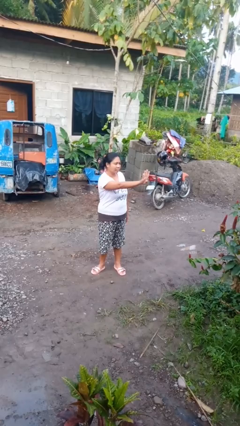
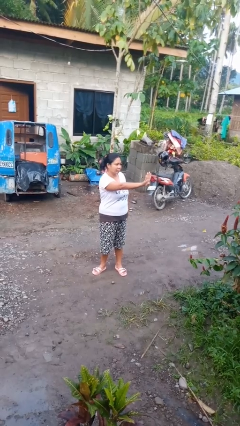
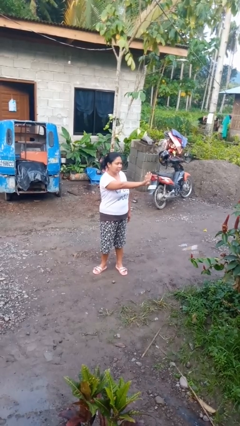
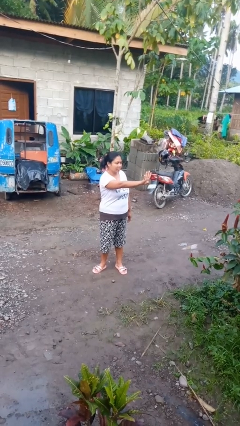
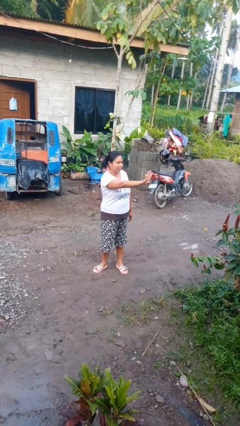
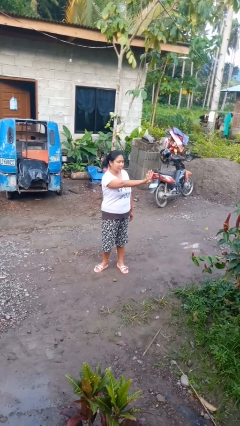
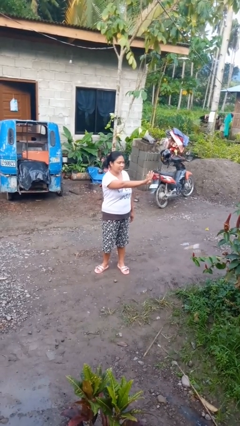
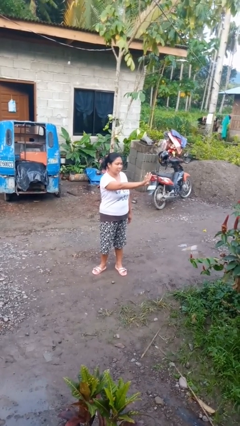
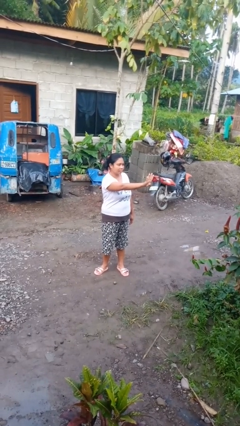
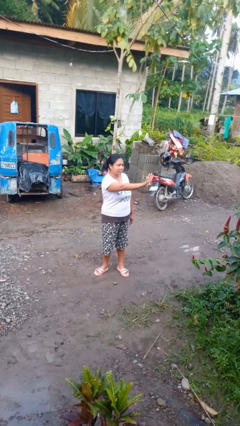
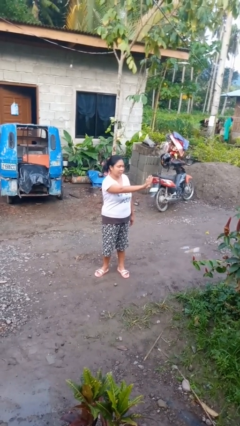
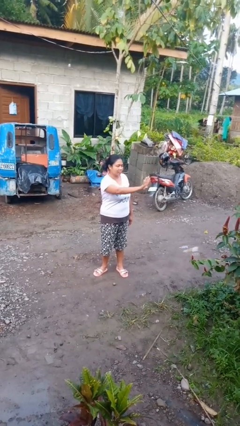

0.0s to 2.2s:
person gestures number four

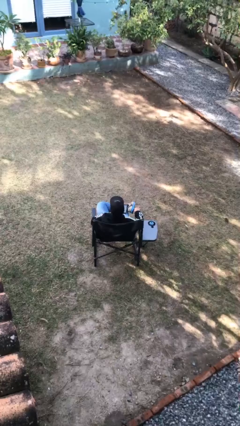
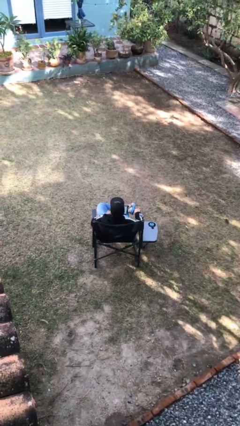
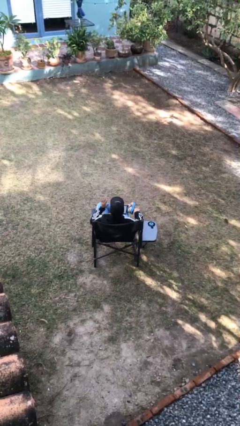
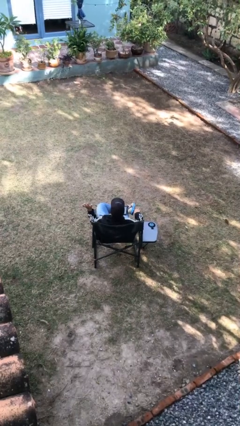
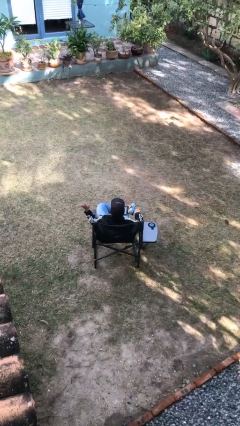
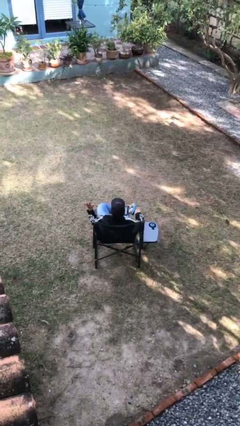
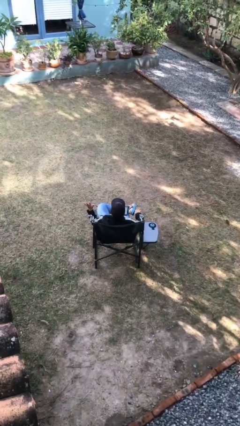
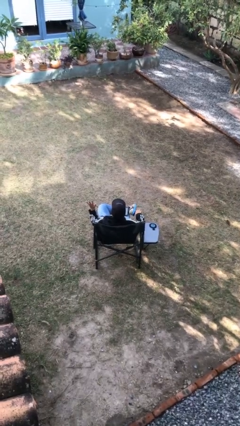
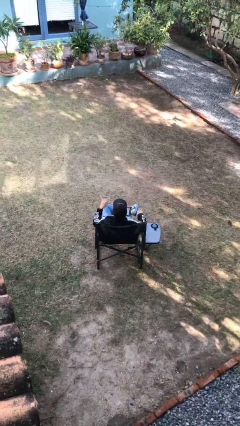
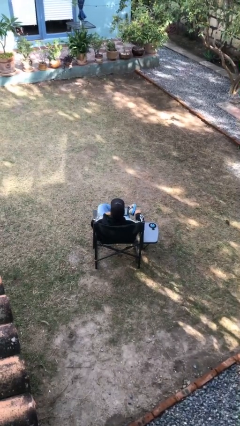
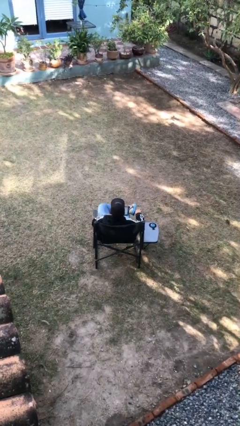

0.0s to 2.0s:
person gestures number five

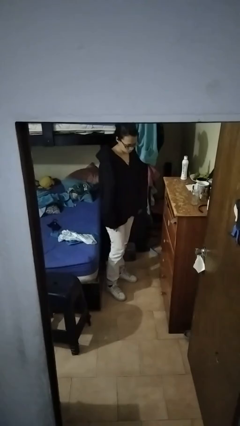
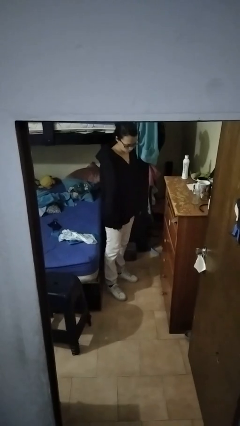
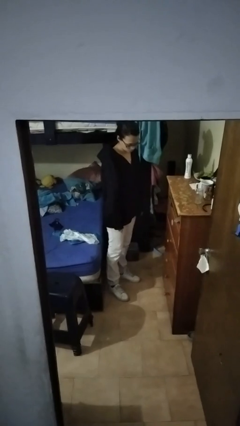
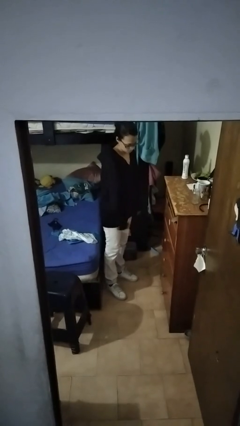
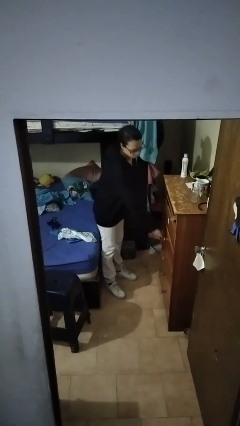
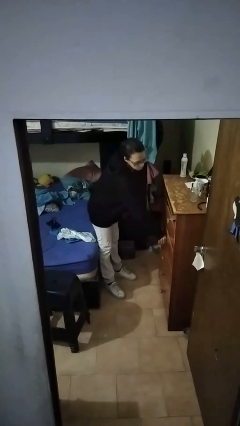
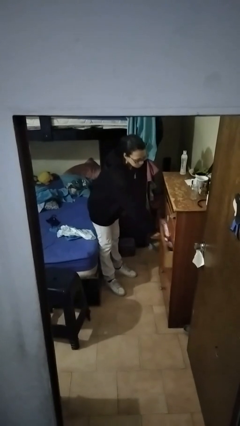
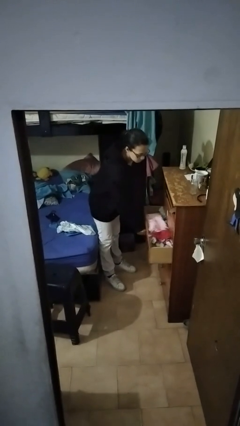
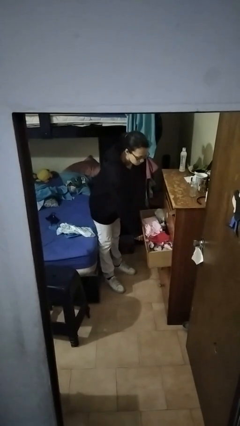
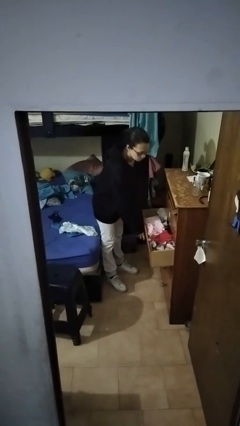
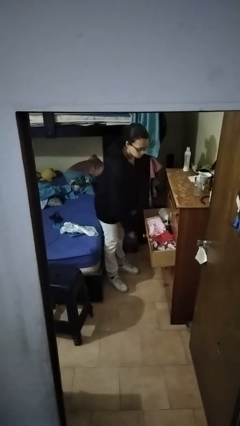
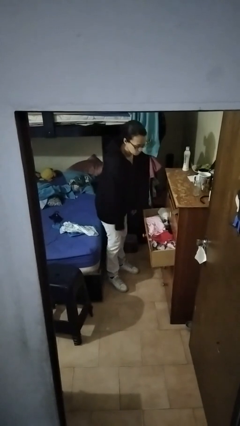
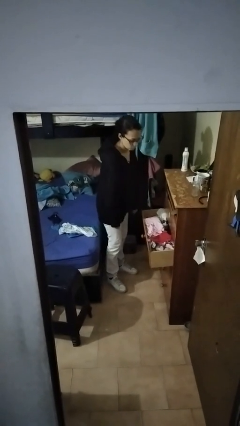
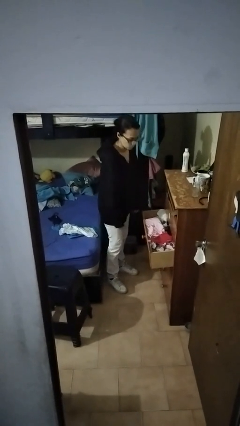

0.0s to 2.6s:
person opens dresser drawer

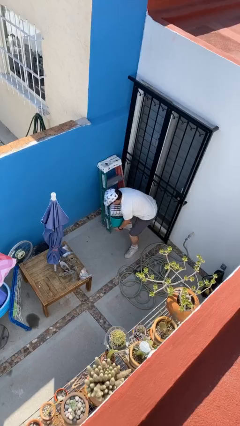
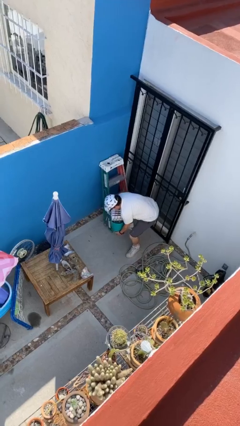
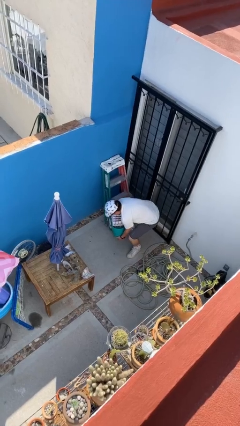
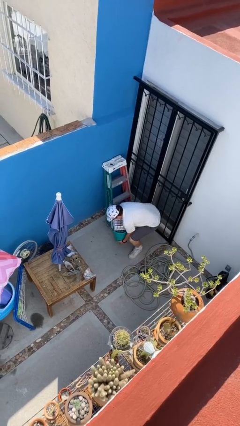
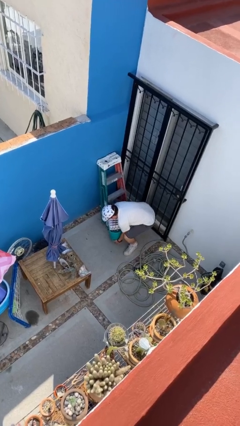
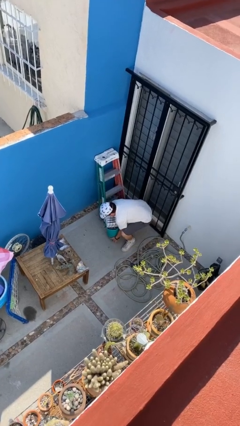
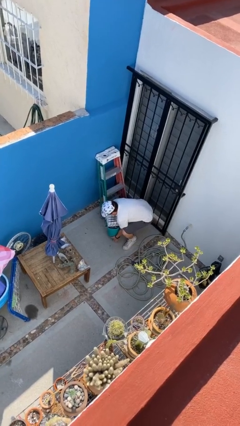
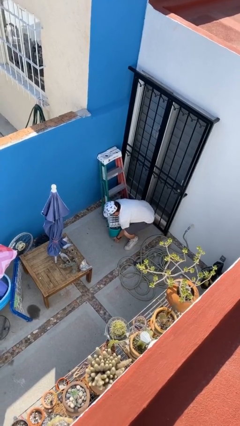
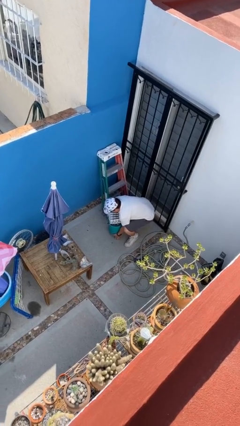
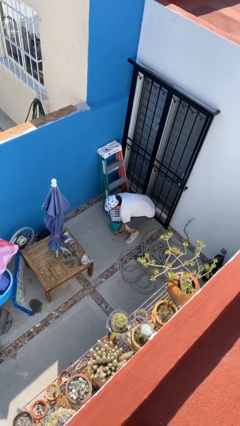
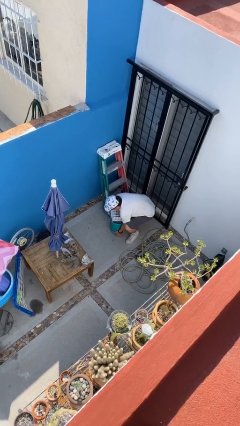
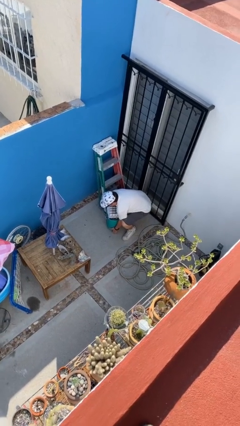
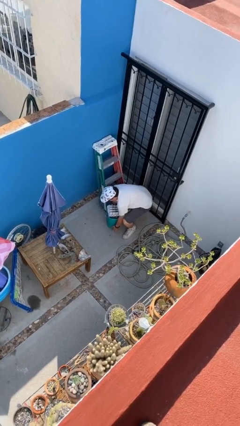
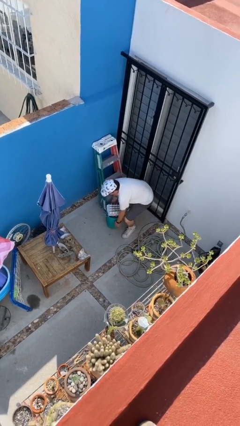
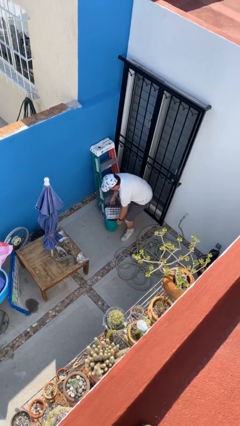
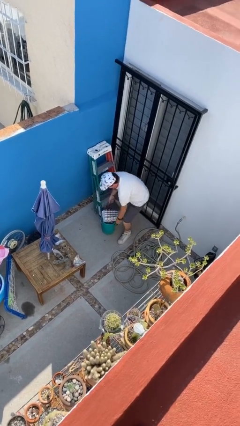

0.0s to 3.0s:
person puts down object on floor

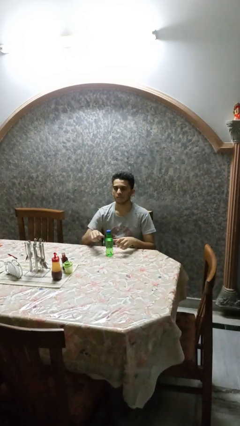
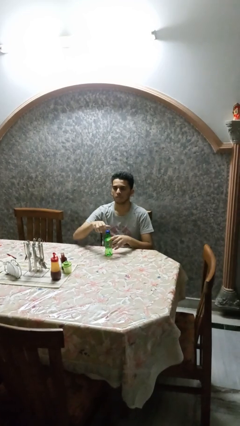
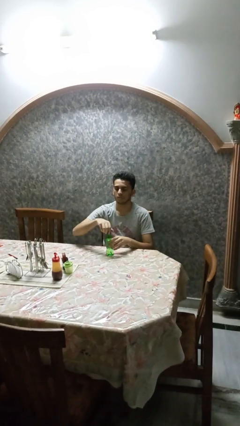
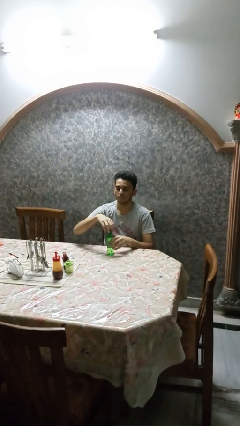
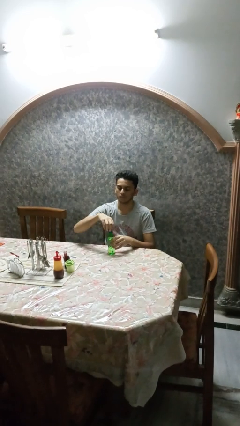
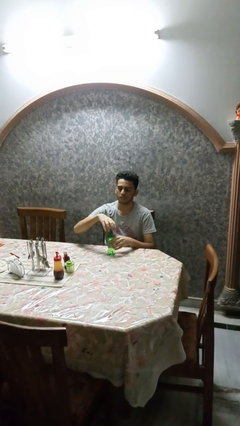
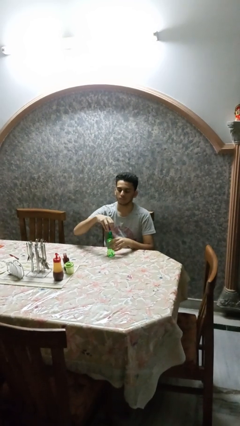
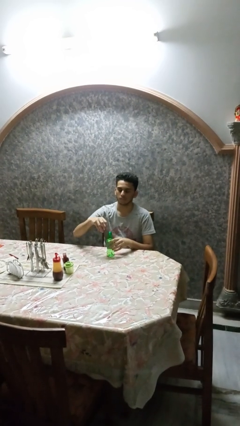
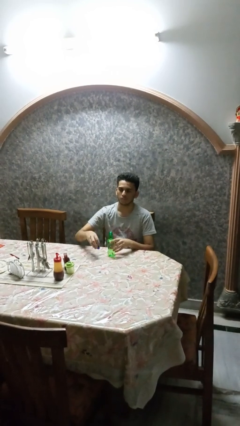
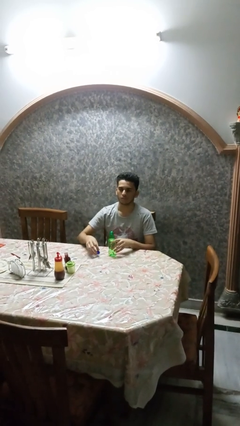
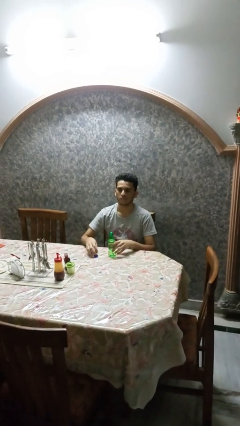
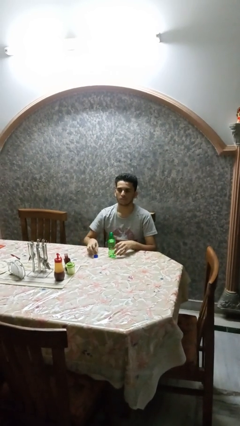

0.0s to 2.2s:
person unscrews lid from bottle

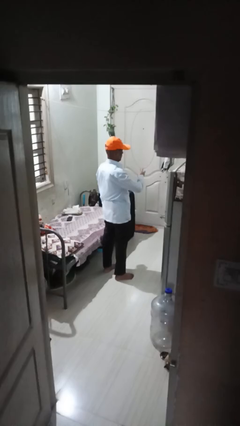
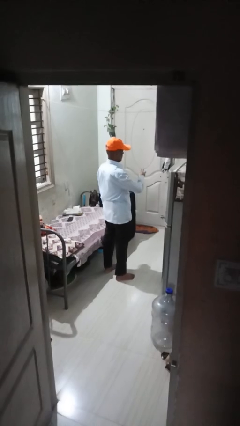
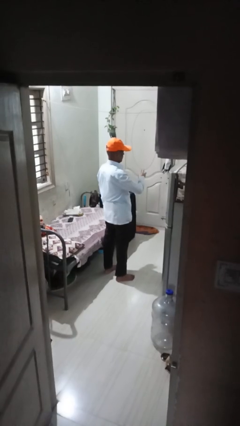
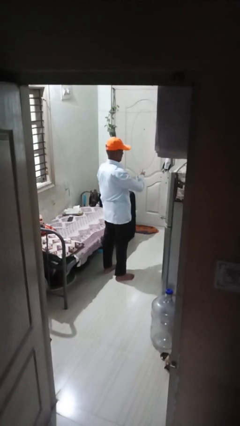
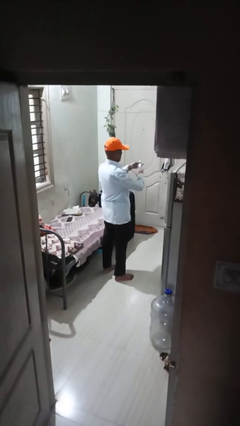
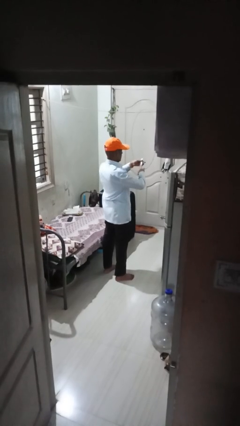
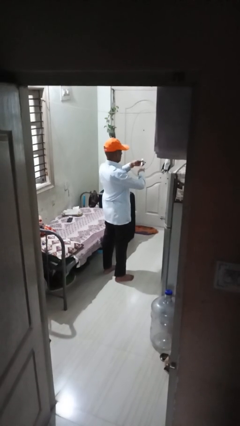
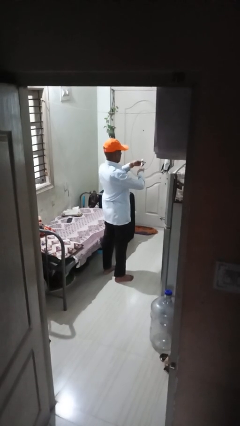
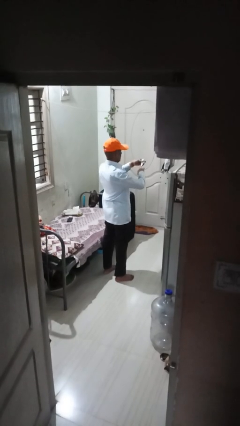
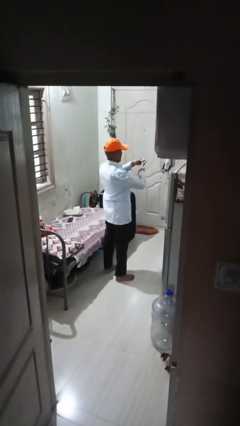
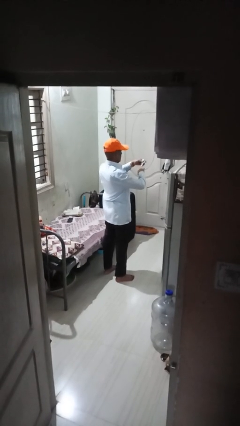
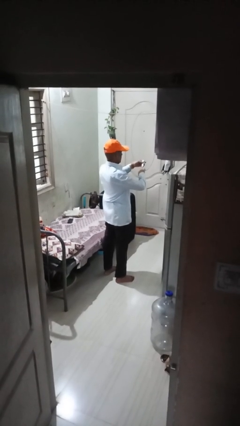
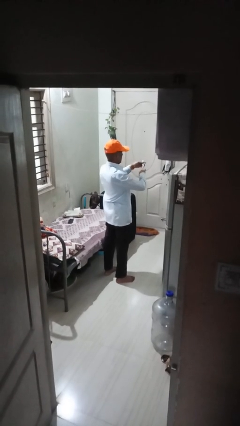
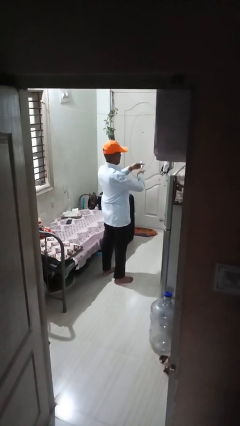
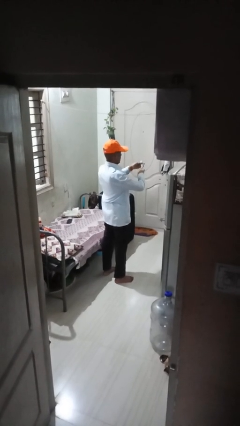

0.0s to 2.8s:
person clips fingernails

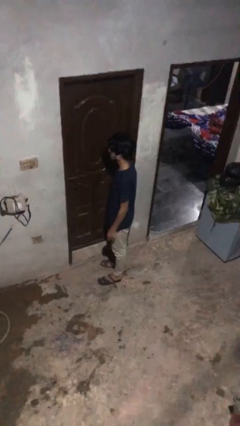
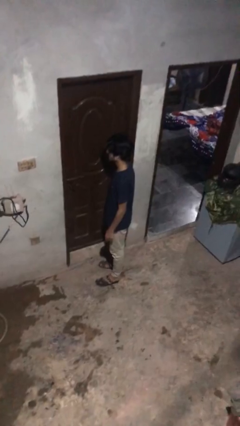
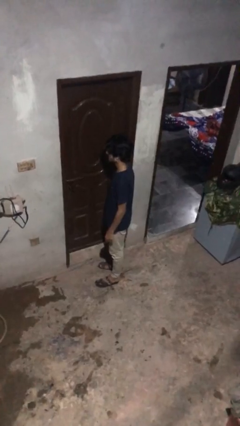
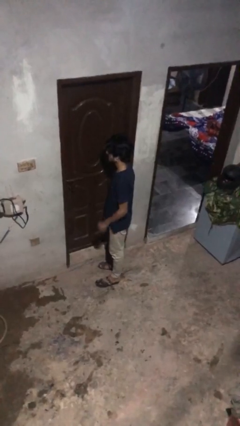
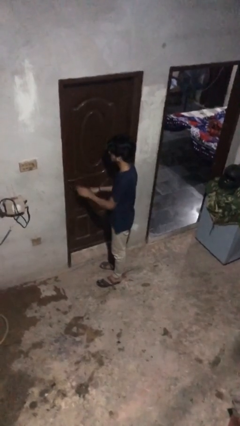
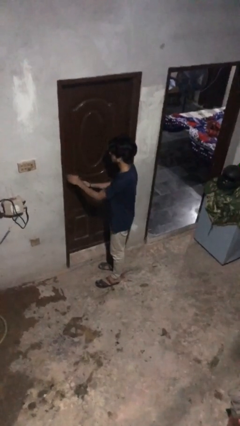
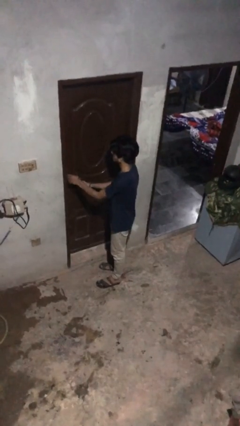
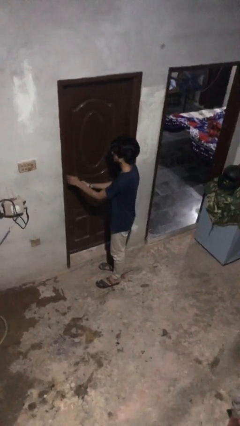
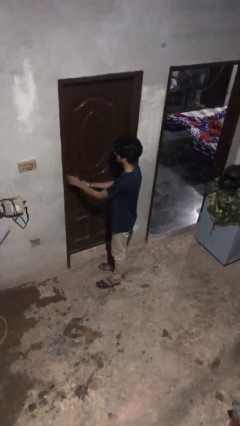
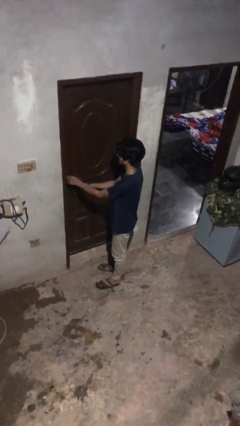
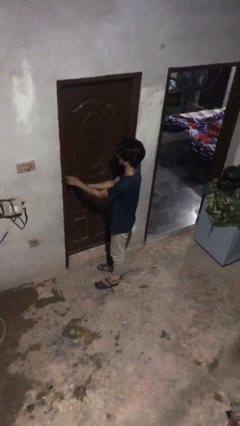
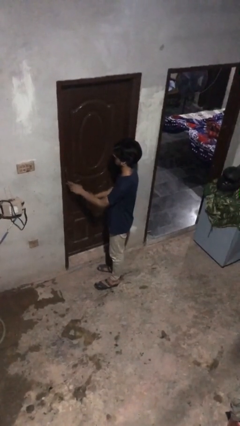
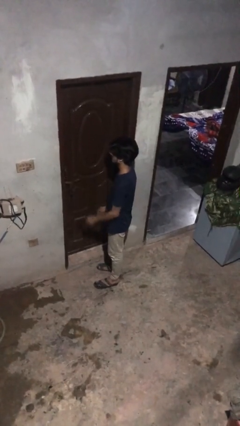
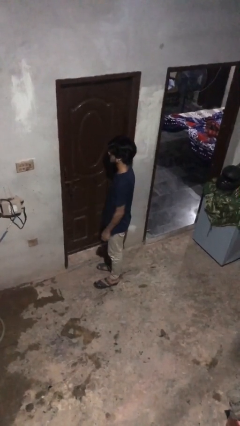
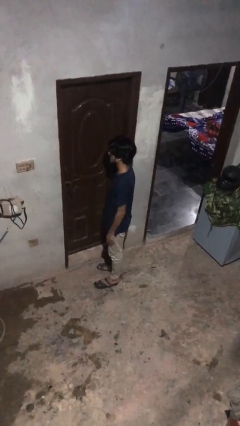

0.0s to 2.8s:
person locks door with keys
